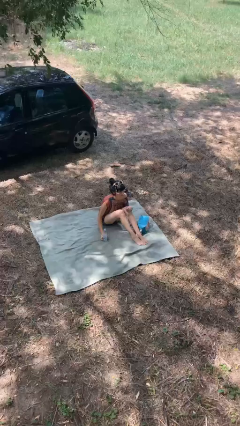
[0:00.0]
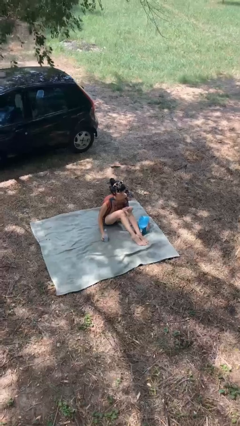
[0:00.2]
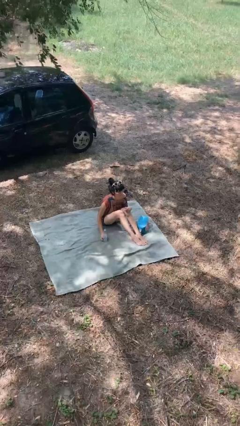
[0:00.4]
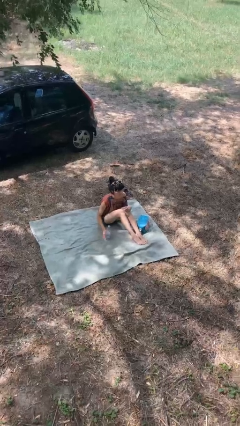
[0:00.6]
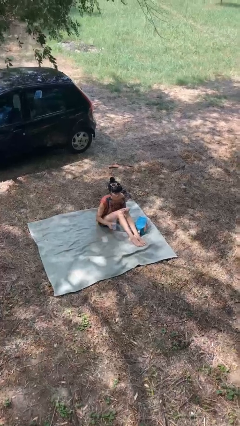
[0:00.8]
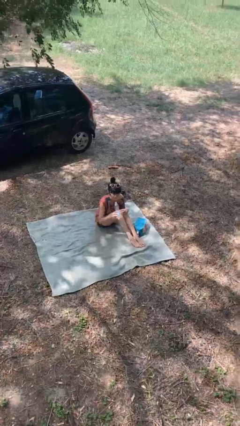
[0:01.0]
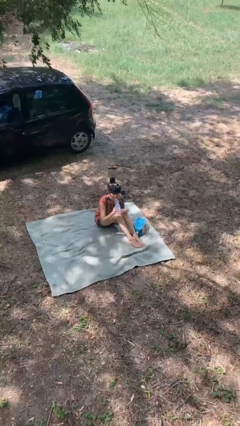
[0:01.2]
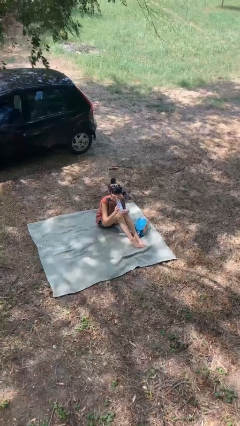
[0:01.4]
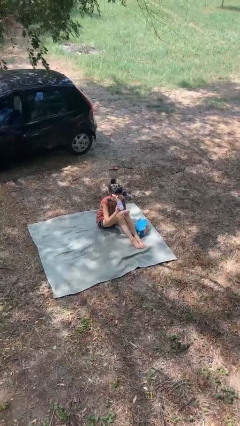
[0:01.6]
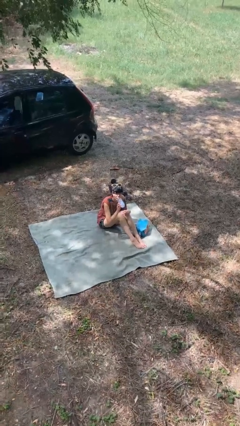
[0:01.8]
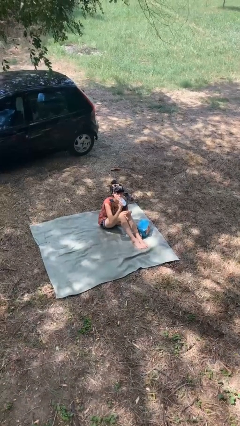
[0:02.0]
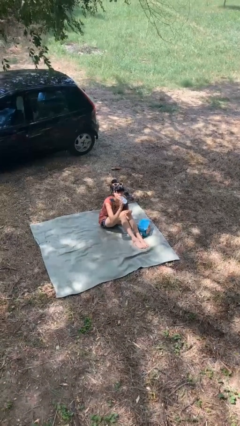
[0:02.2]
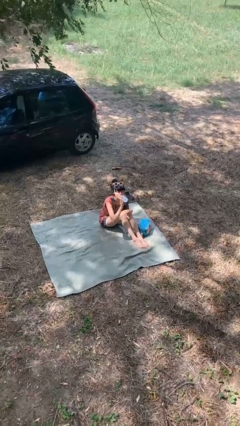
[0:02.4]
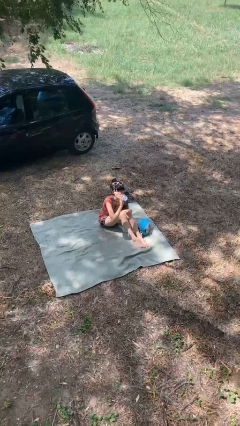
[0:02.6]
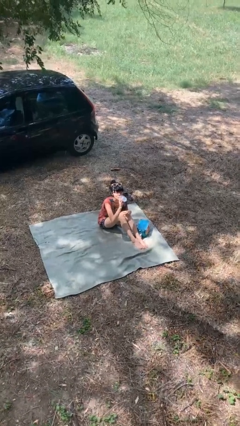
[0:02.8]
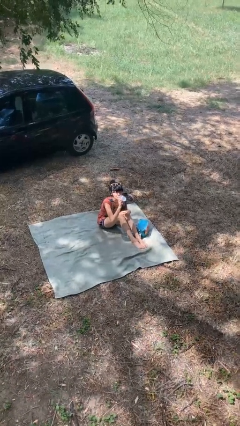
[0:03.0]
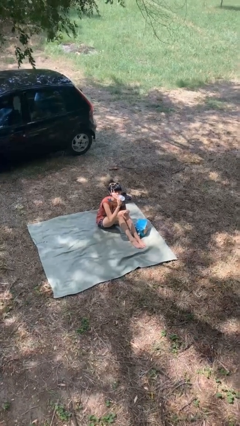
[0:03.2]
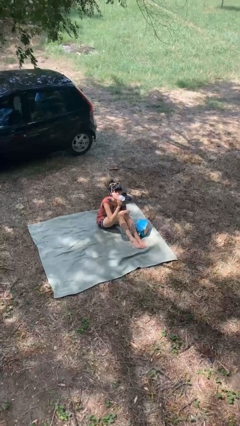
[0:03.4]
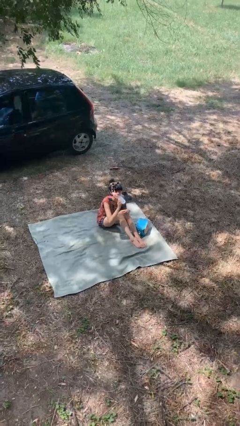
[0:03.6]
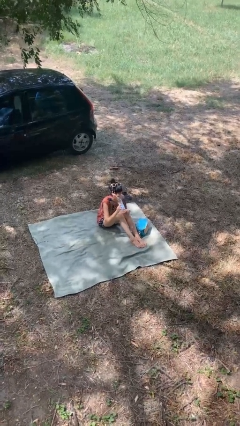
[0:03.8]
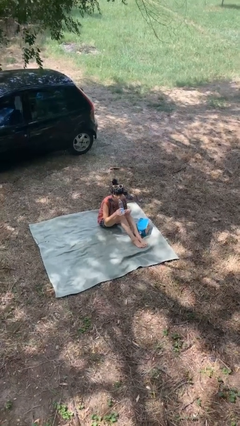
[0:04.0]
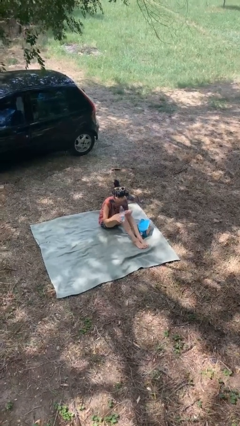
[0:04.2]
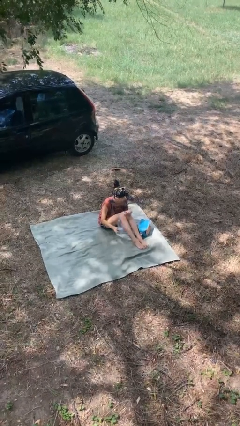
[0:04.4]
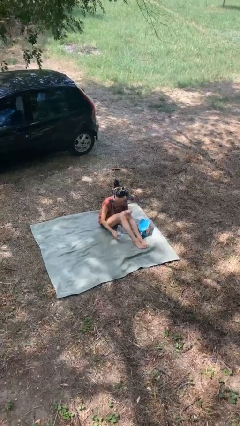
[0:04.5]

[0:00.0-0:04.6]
person drinks from bottle

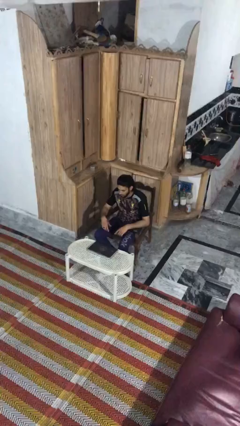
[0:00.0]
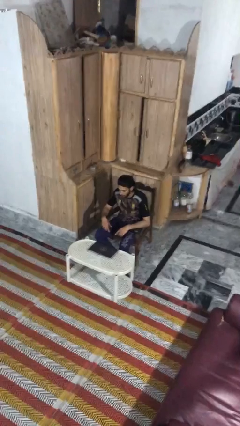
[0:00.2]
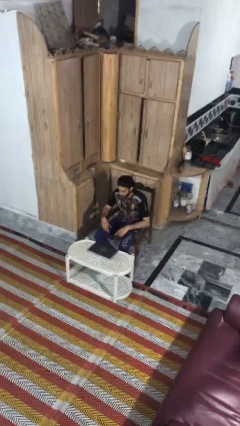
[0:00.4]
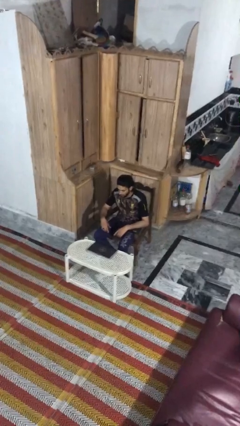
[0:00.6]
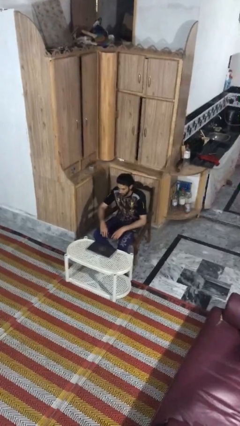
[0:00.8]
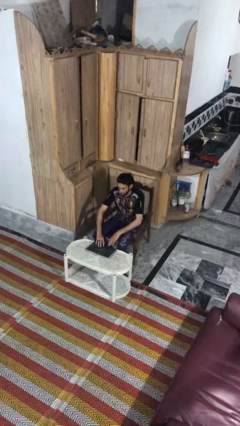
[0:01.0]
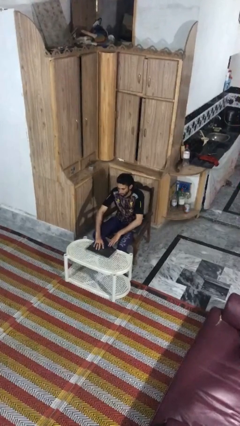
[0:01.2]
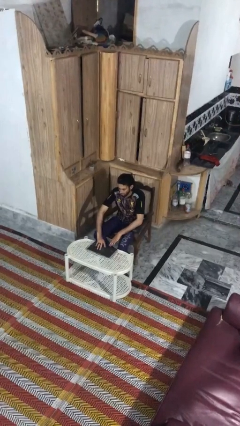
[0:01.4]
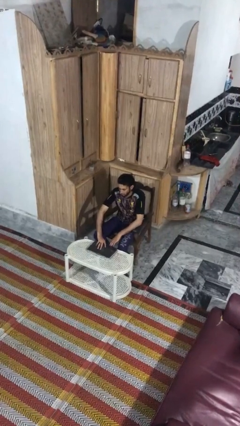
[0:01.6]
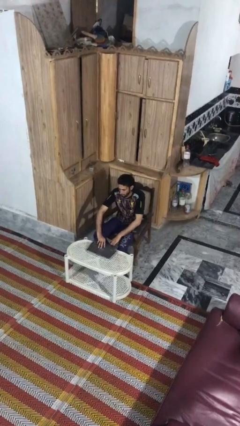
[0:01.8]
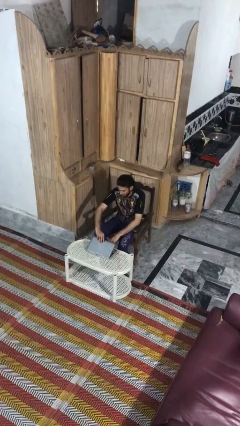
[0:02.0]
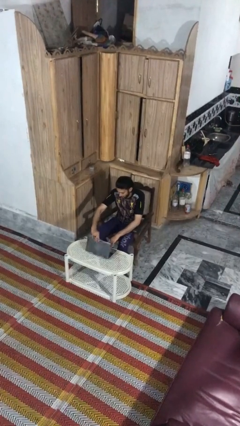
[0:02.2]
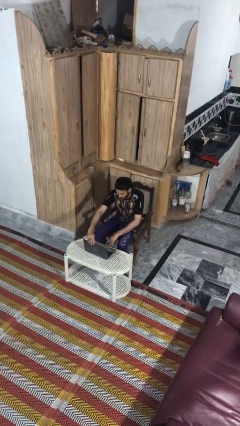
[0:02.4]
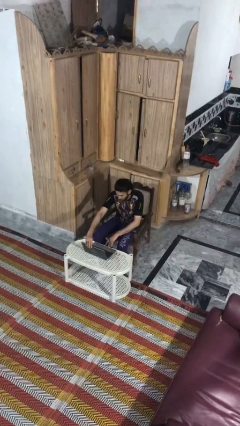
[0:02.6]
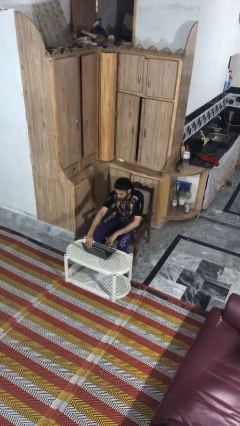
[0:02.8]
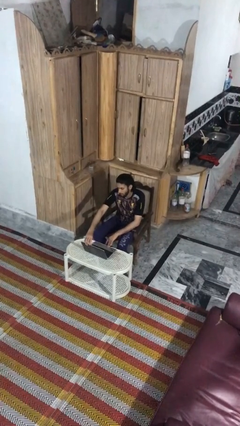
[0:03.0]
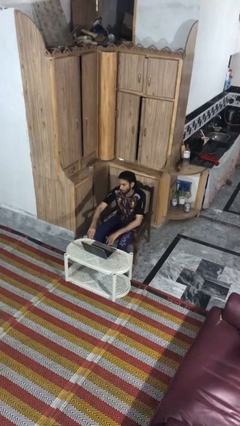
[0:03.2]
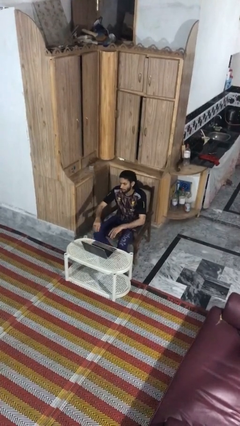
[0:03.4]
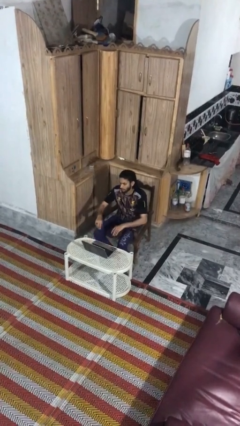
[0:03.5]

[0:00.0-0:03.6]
person opens laptop

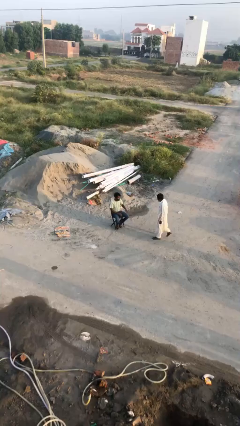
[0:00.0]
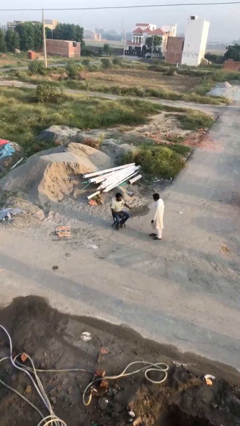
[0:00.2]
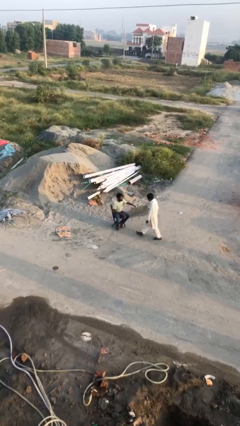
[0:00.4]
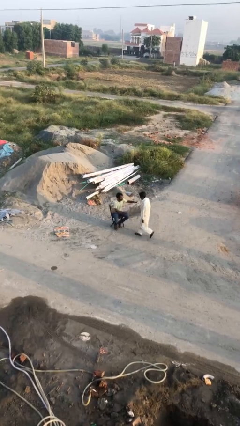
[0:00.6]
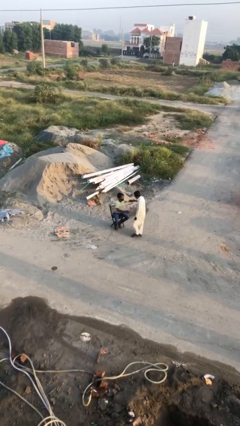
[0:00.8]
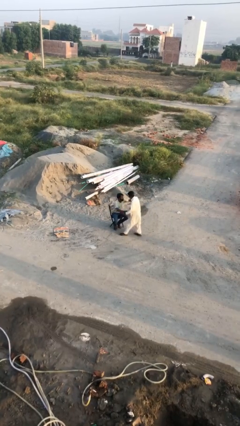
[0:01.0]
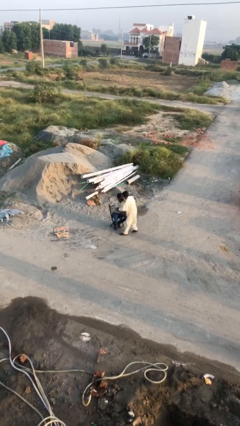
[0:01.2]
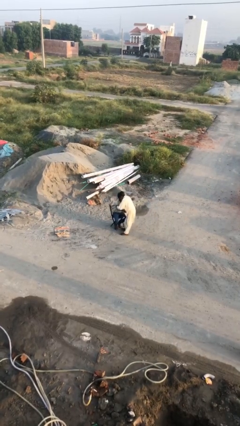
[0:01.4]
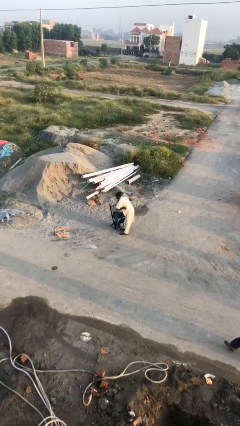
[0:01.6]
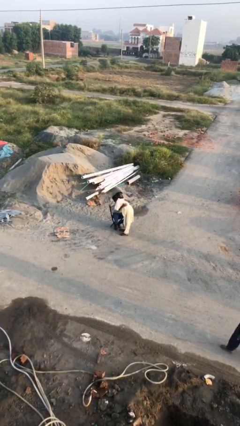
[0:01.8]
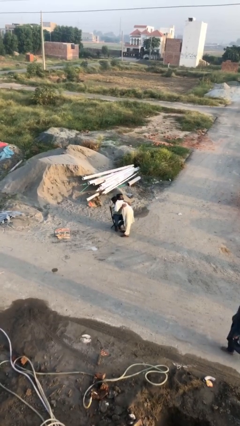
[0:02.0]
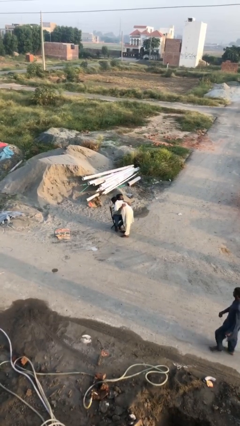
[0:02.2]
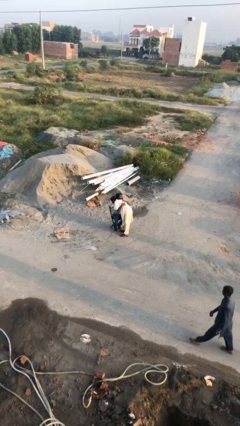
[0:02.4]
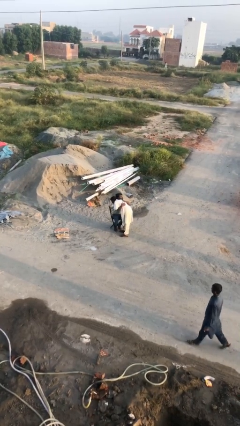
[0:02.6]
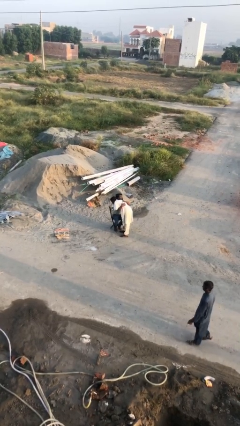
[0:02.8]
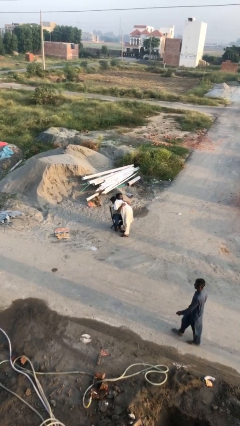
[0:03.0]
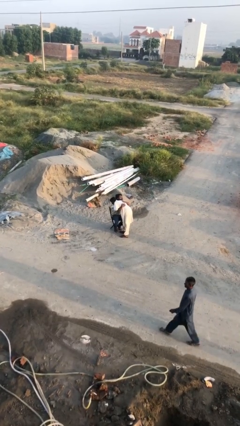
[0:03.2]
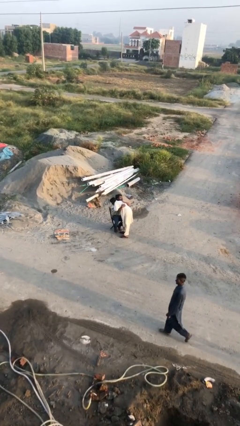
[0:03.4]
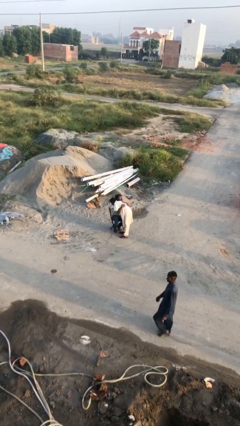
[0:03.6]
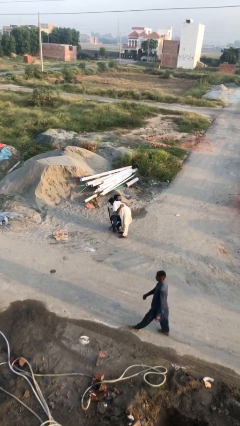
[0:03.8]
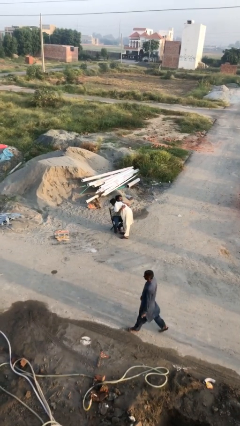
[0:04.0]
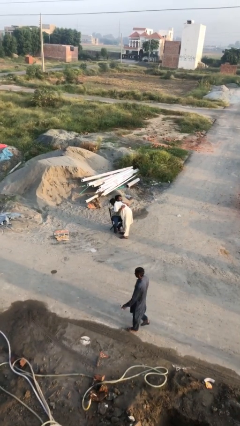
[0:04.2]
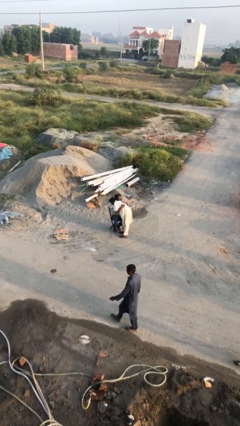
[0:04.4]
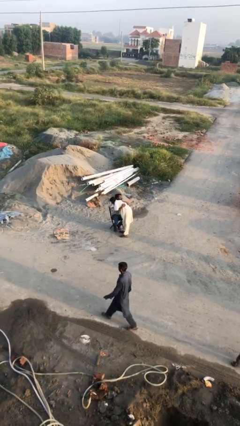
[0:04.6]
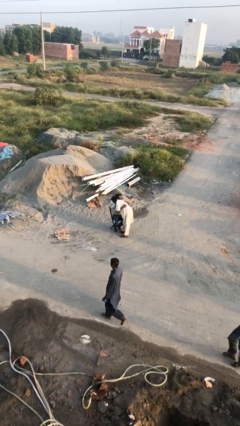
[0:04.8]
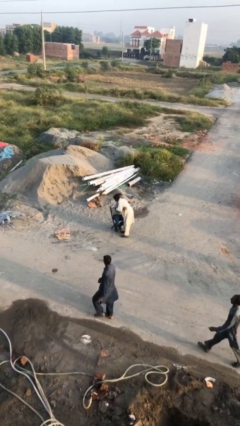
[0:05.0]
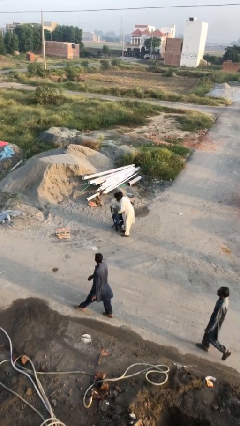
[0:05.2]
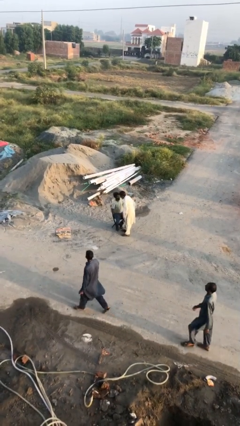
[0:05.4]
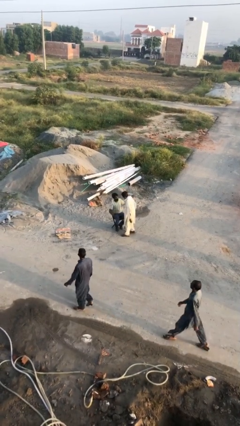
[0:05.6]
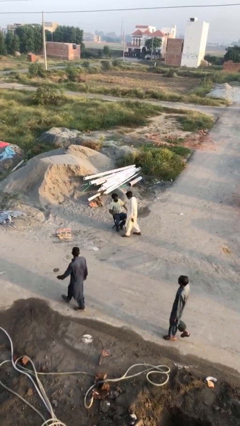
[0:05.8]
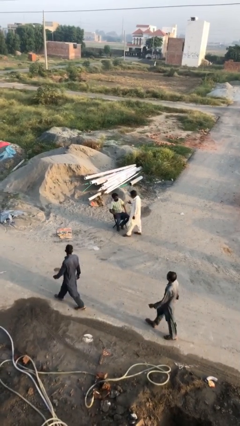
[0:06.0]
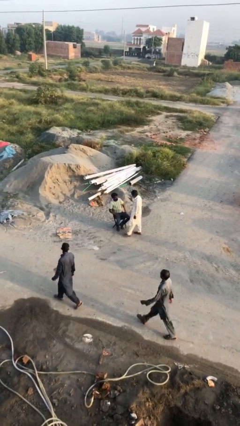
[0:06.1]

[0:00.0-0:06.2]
person embraces person

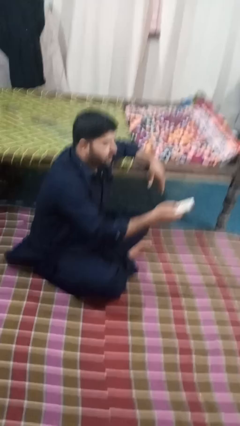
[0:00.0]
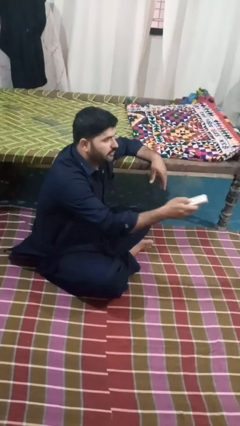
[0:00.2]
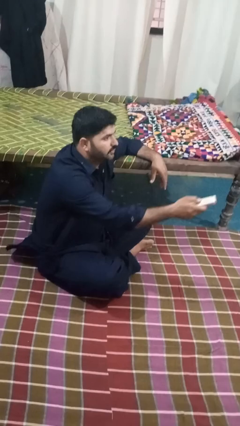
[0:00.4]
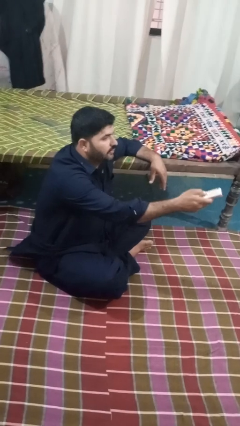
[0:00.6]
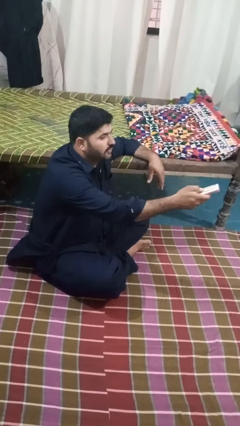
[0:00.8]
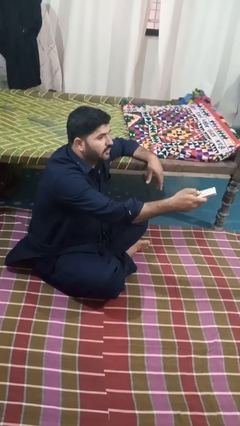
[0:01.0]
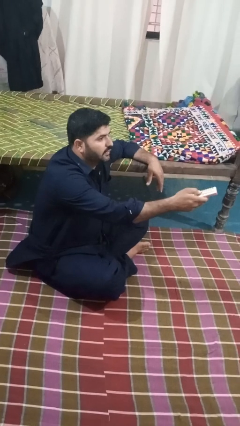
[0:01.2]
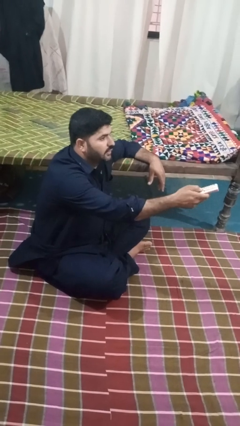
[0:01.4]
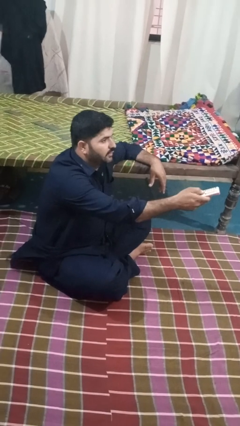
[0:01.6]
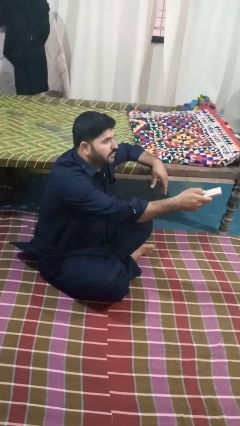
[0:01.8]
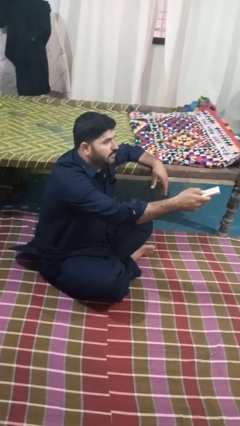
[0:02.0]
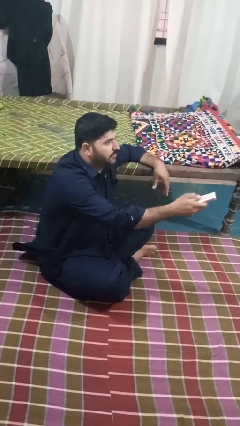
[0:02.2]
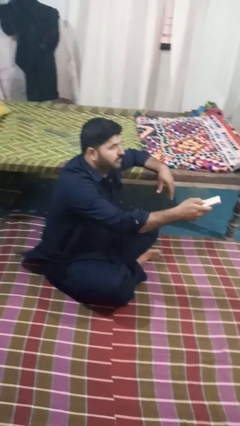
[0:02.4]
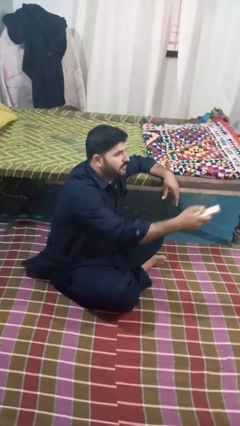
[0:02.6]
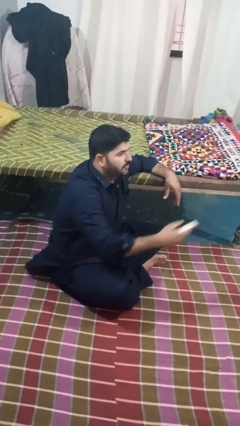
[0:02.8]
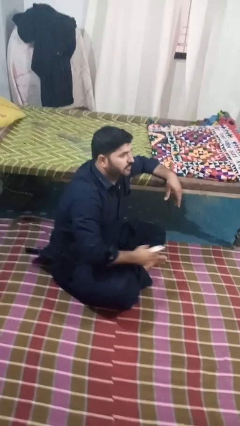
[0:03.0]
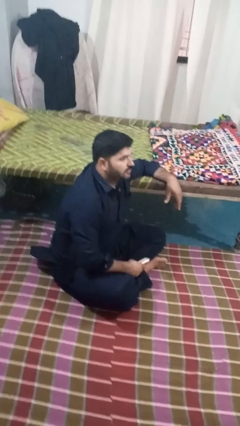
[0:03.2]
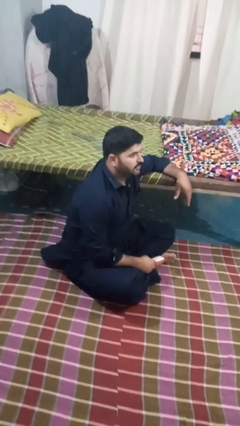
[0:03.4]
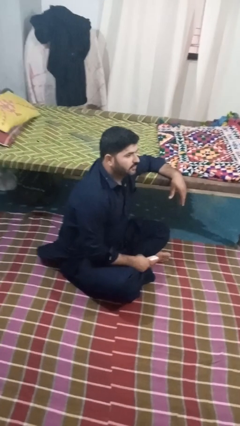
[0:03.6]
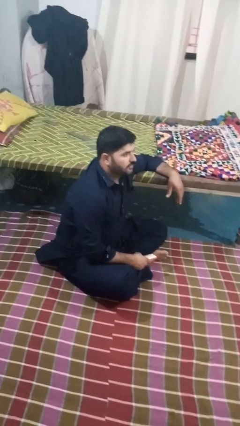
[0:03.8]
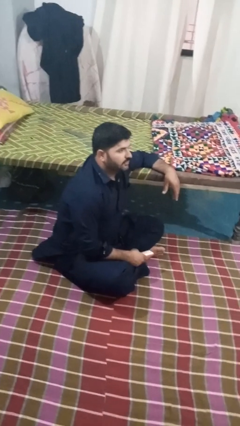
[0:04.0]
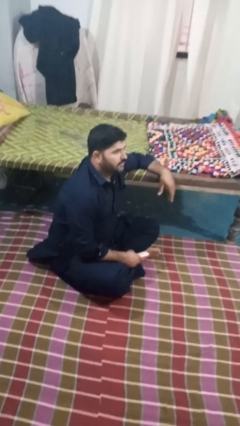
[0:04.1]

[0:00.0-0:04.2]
person uses television remote
